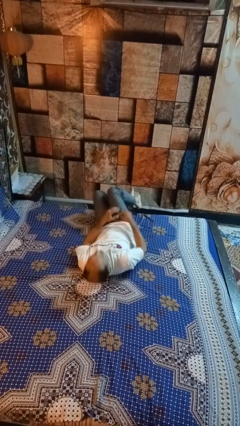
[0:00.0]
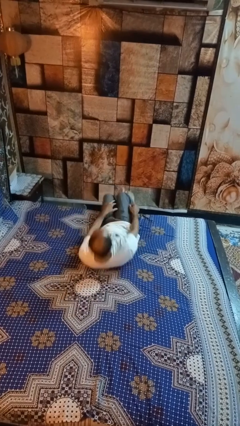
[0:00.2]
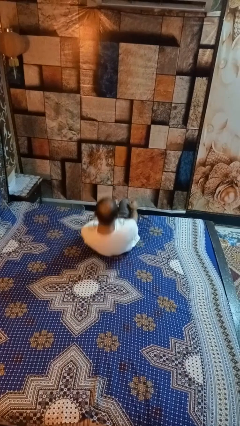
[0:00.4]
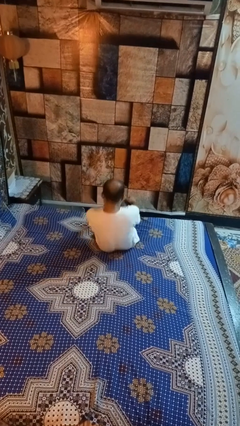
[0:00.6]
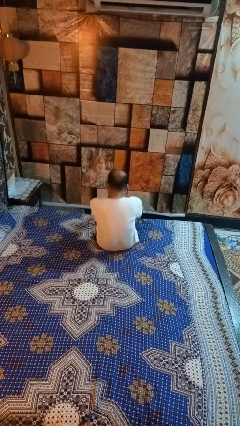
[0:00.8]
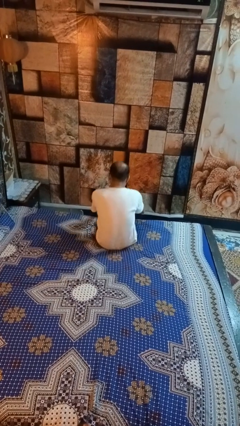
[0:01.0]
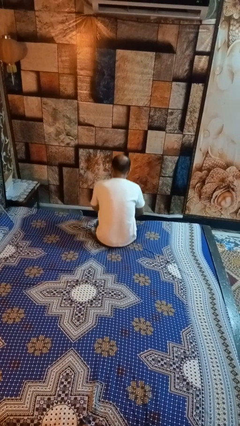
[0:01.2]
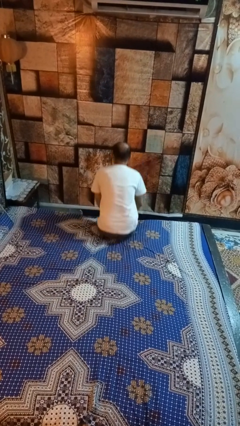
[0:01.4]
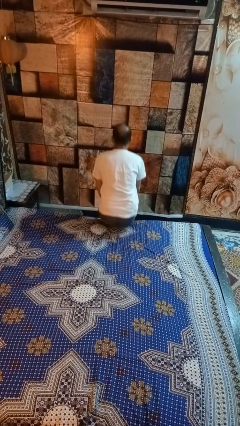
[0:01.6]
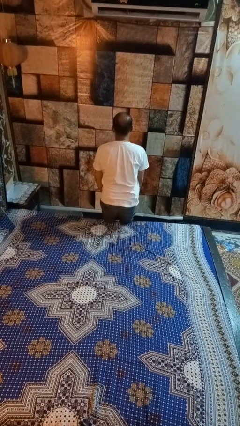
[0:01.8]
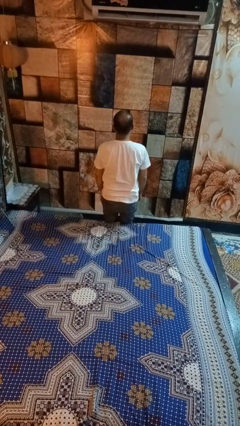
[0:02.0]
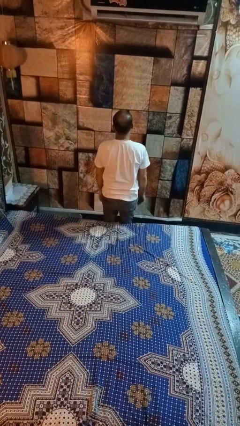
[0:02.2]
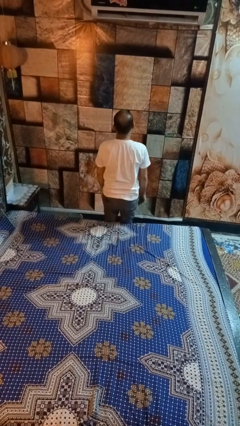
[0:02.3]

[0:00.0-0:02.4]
person stands up

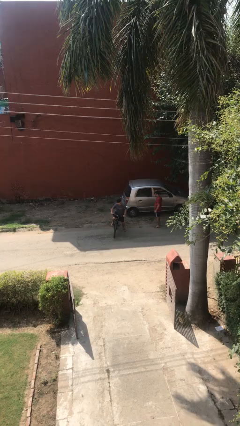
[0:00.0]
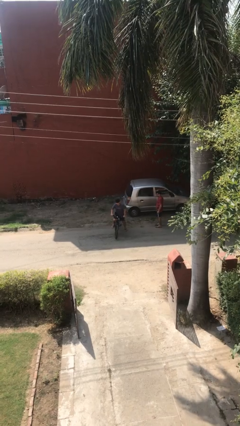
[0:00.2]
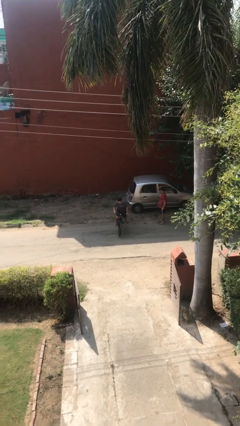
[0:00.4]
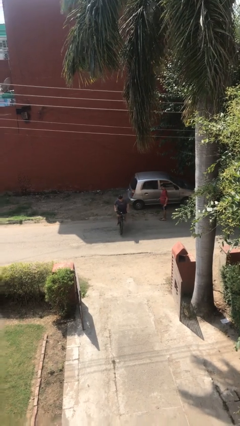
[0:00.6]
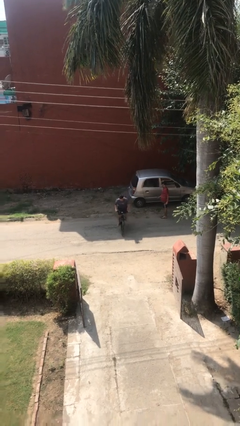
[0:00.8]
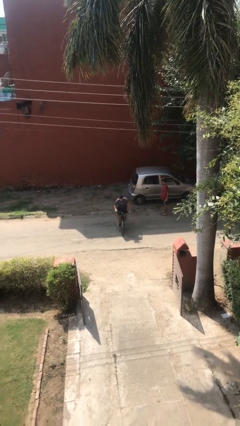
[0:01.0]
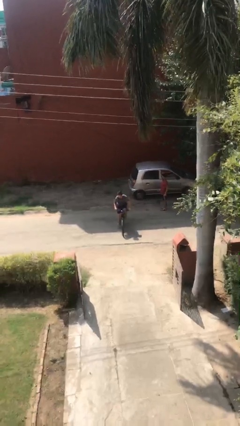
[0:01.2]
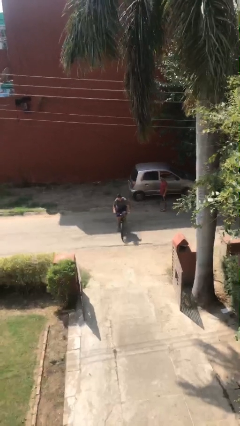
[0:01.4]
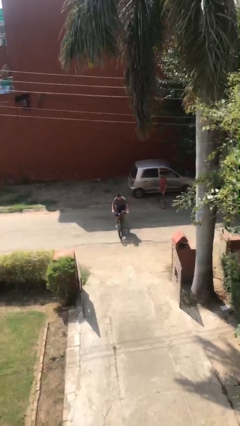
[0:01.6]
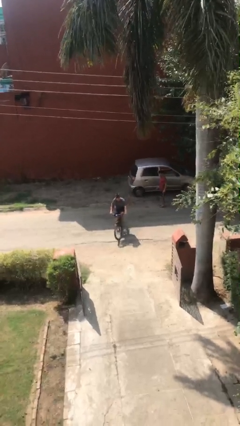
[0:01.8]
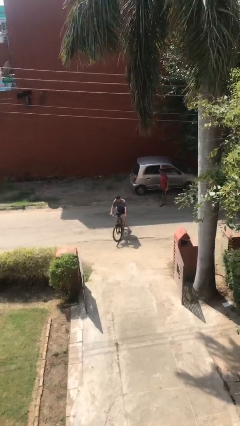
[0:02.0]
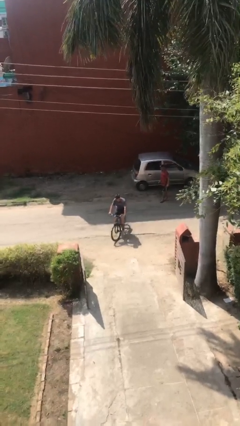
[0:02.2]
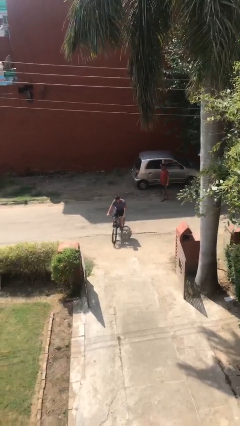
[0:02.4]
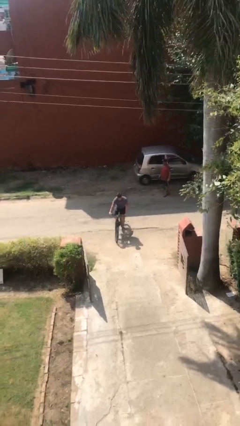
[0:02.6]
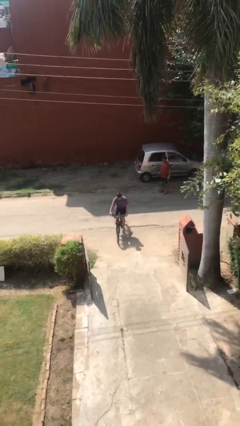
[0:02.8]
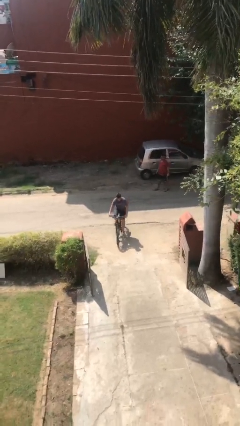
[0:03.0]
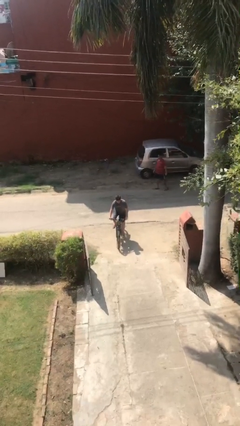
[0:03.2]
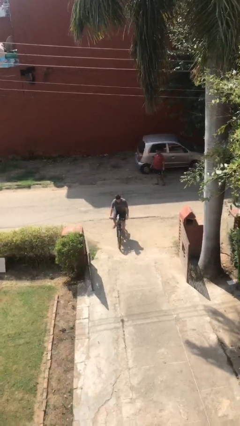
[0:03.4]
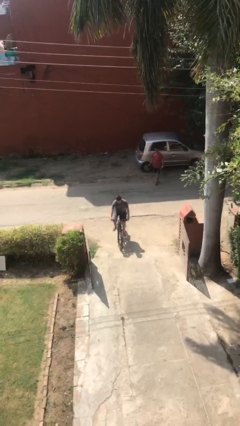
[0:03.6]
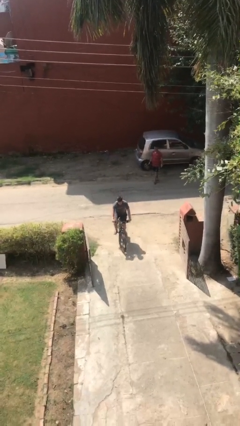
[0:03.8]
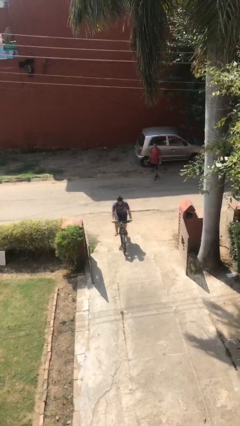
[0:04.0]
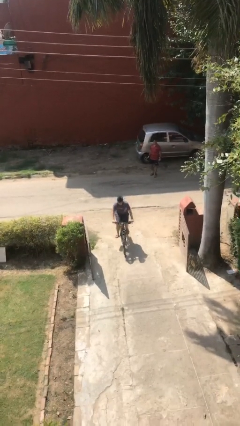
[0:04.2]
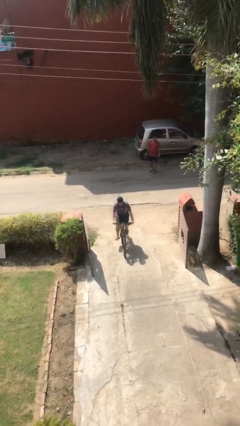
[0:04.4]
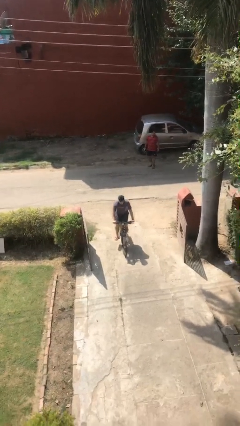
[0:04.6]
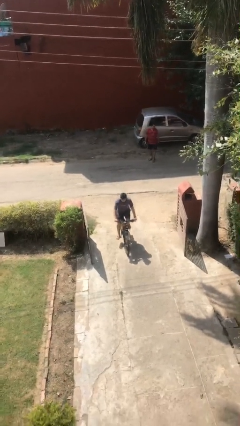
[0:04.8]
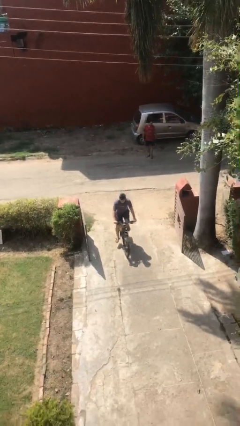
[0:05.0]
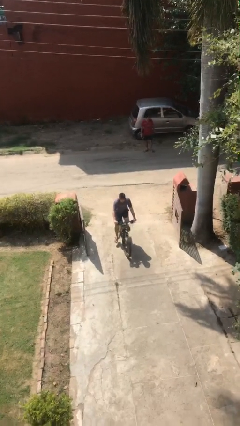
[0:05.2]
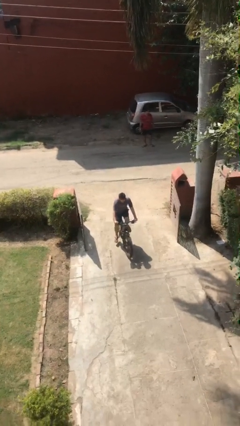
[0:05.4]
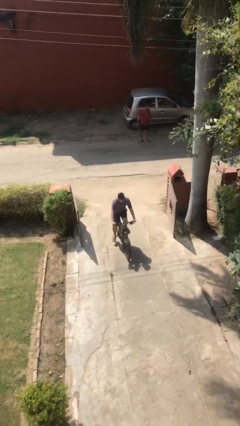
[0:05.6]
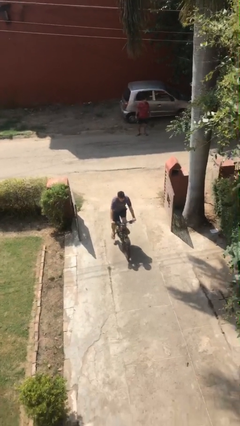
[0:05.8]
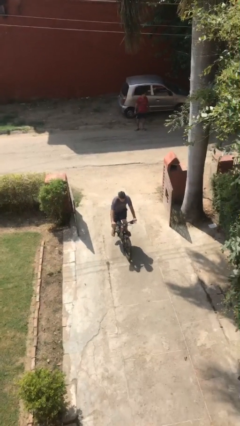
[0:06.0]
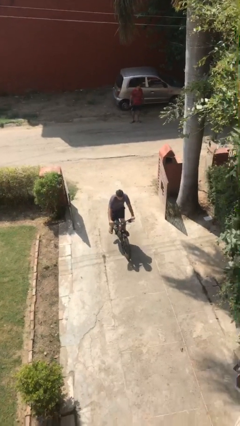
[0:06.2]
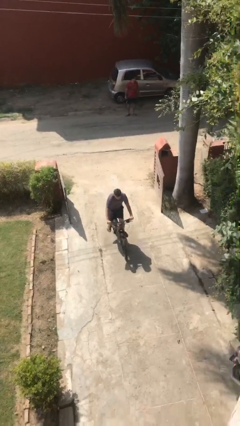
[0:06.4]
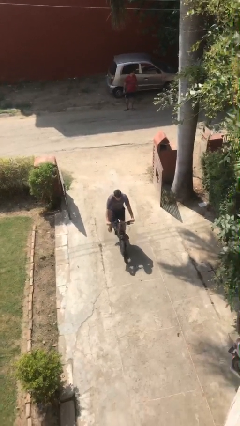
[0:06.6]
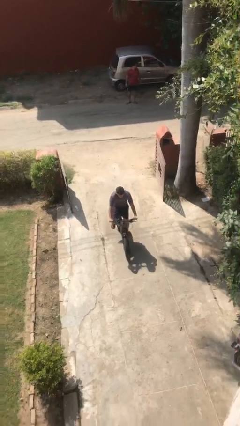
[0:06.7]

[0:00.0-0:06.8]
person rides bicycle

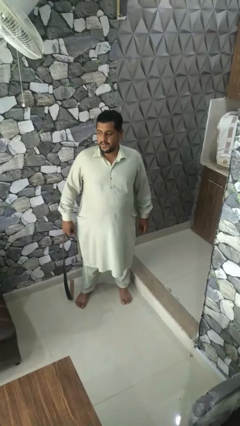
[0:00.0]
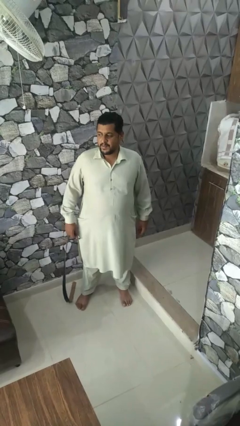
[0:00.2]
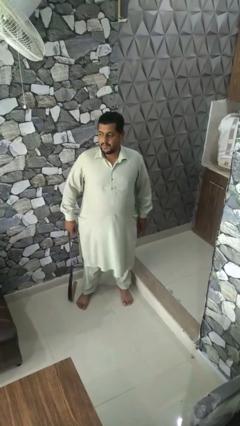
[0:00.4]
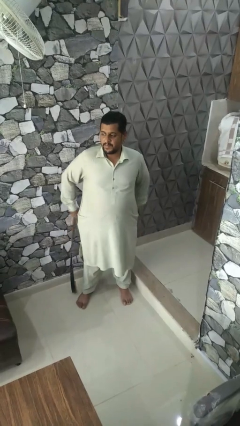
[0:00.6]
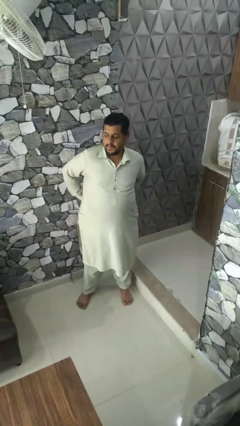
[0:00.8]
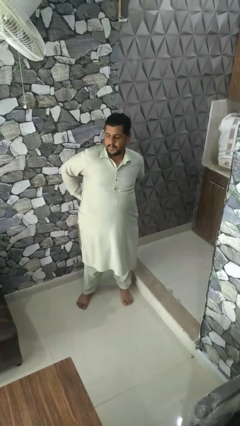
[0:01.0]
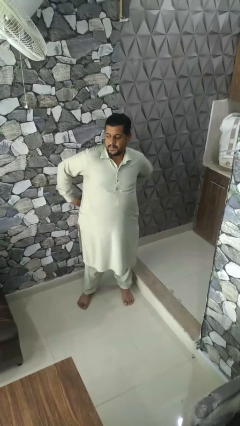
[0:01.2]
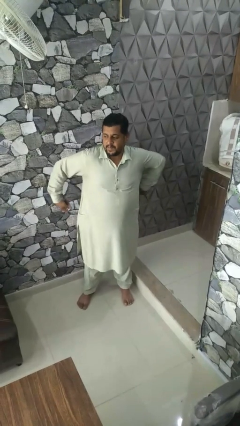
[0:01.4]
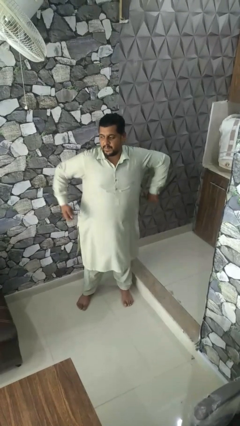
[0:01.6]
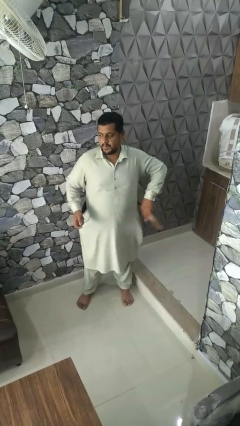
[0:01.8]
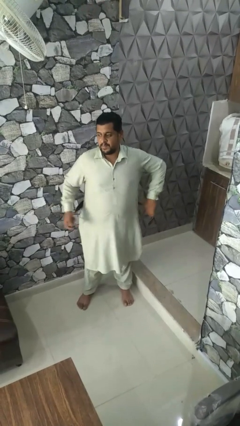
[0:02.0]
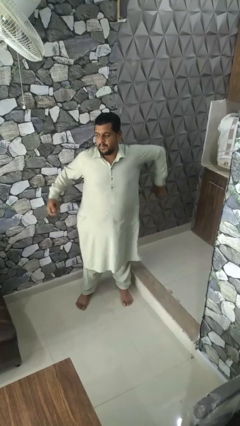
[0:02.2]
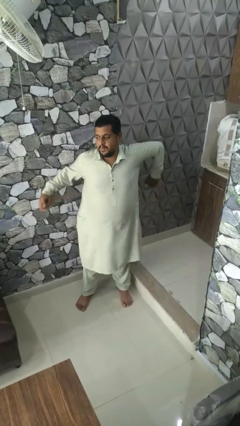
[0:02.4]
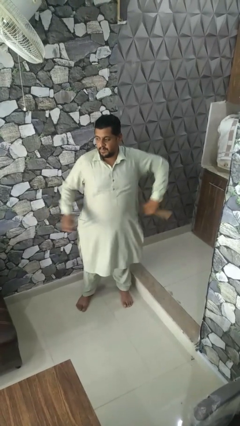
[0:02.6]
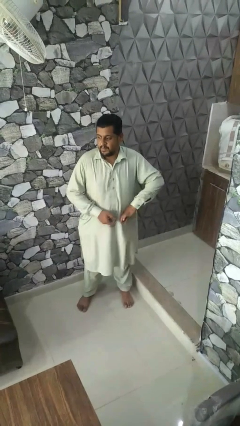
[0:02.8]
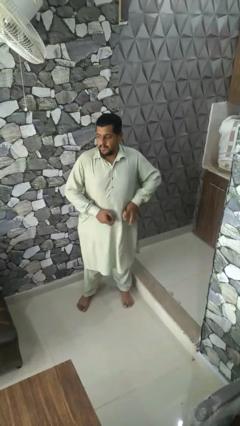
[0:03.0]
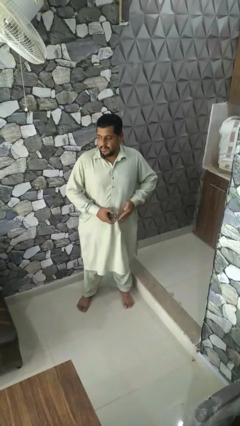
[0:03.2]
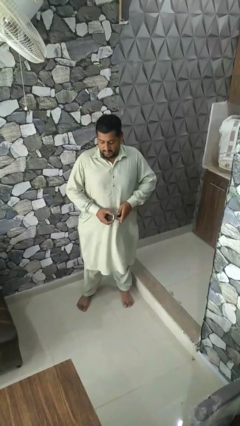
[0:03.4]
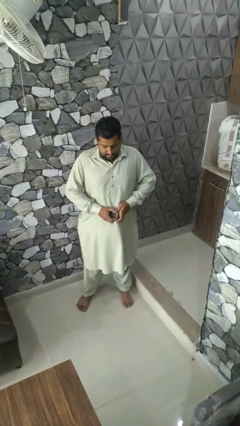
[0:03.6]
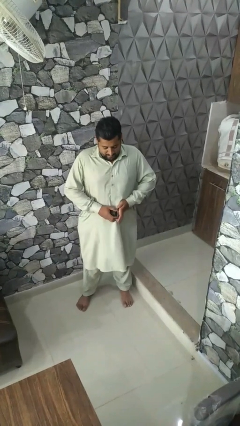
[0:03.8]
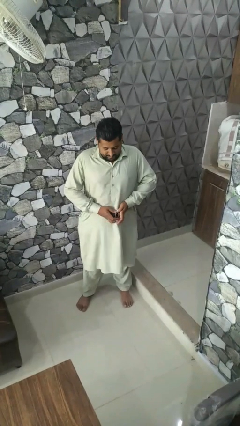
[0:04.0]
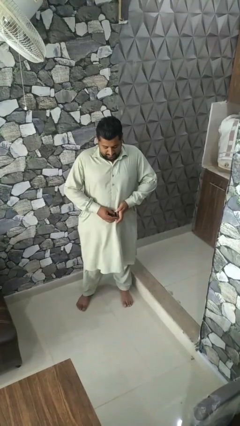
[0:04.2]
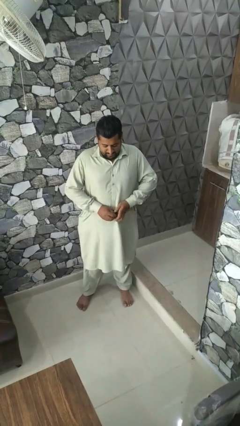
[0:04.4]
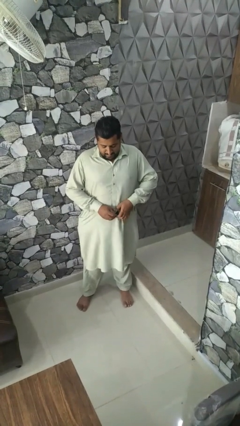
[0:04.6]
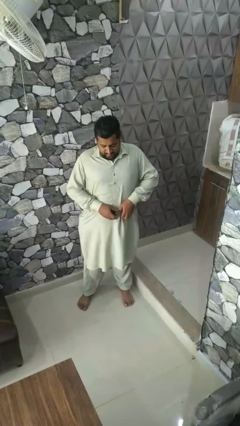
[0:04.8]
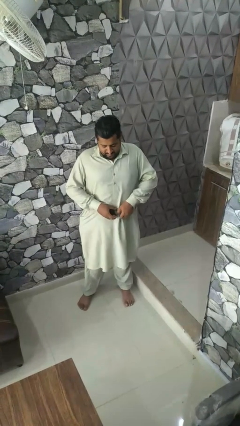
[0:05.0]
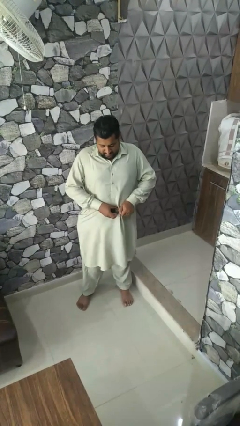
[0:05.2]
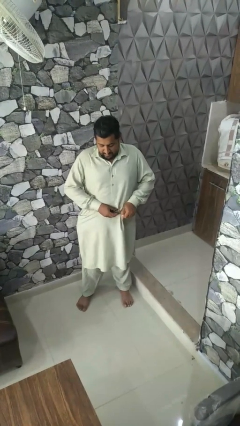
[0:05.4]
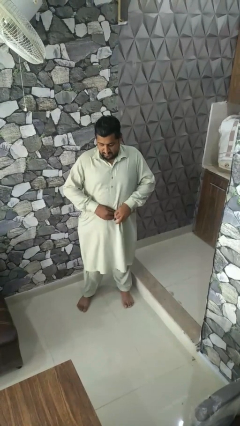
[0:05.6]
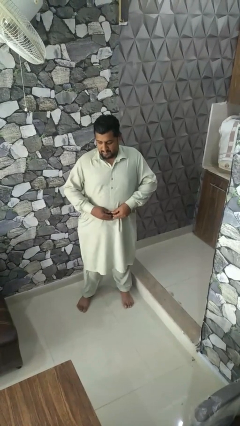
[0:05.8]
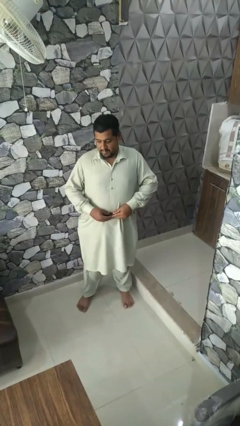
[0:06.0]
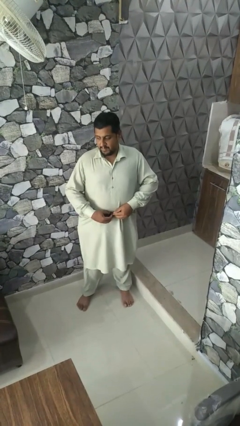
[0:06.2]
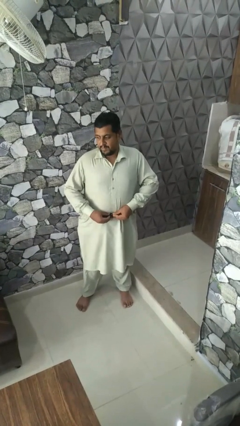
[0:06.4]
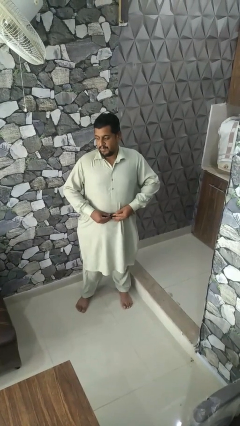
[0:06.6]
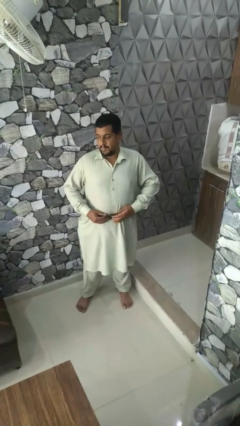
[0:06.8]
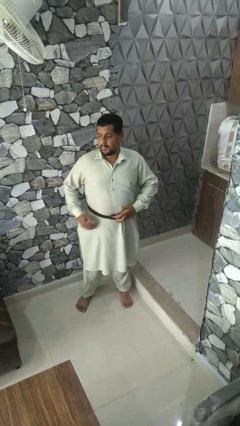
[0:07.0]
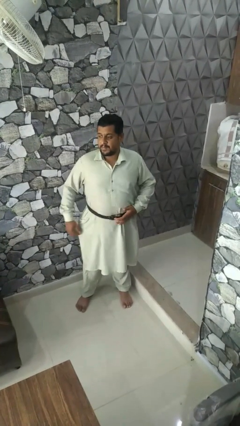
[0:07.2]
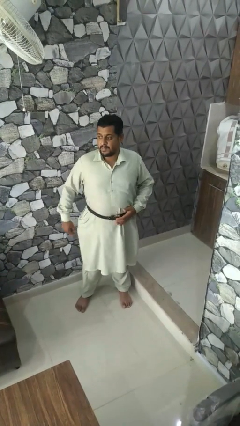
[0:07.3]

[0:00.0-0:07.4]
person puts on belt

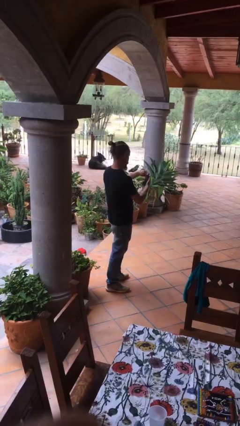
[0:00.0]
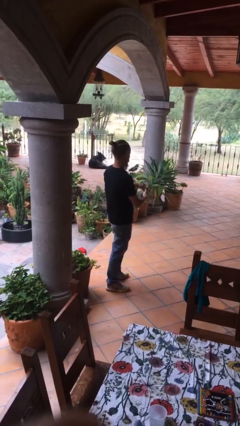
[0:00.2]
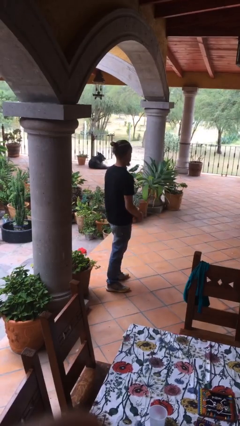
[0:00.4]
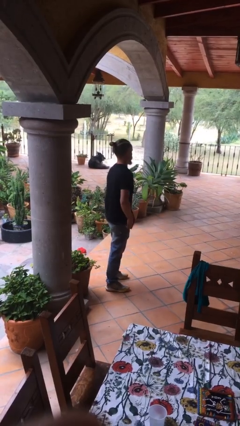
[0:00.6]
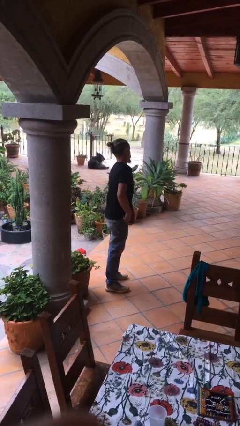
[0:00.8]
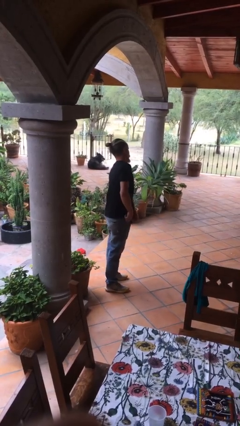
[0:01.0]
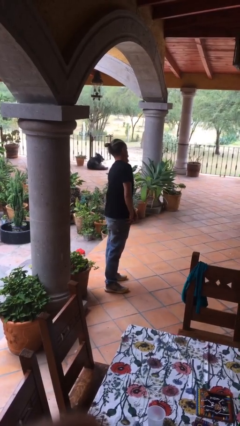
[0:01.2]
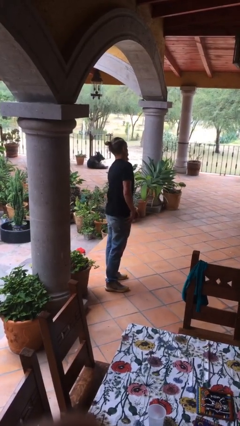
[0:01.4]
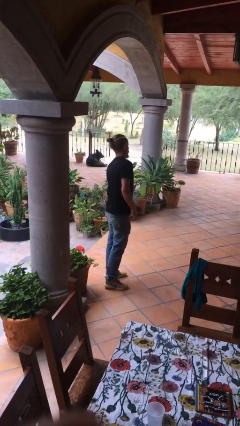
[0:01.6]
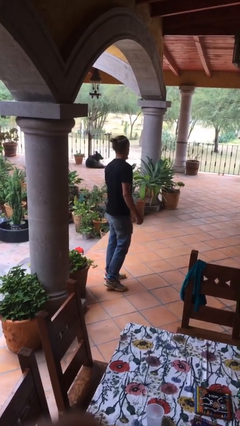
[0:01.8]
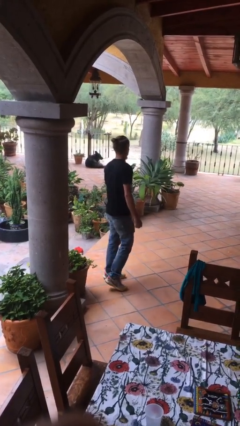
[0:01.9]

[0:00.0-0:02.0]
person puts phone into pocket
